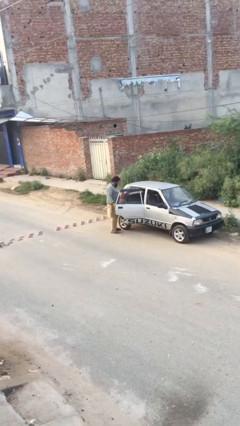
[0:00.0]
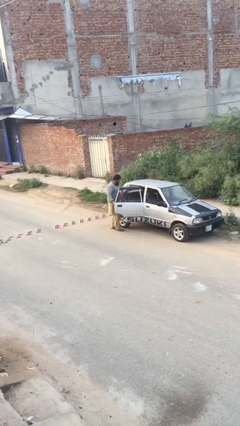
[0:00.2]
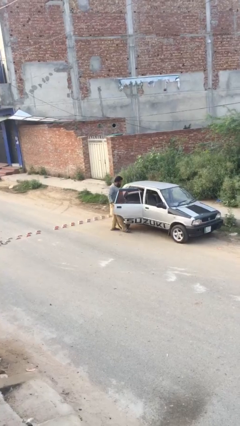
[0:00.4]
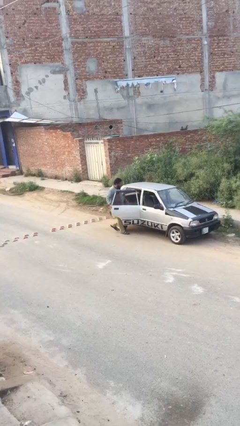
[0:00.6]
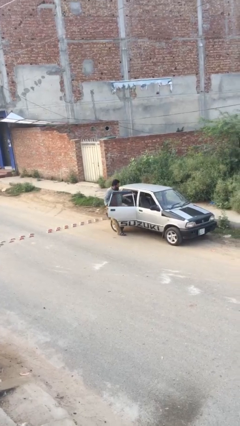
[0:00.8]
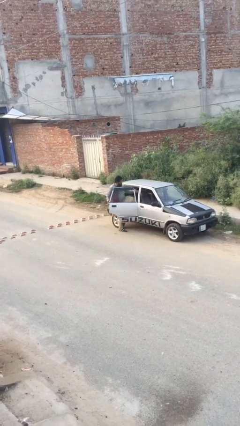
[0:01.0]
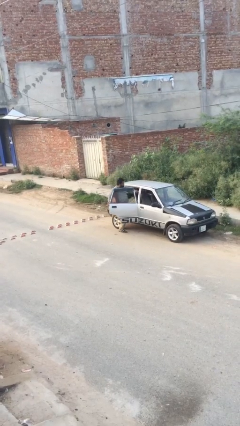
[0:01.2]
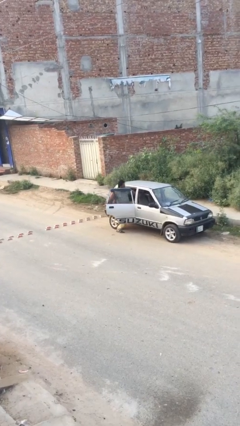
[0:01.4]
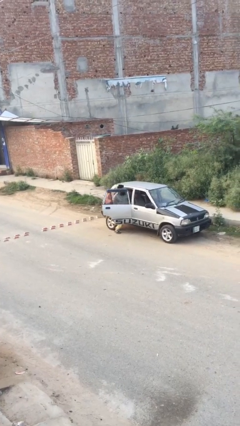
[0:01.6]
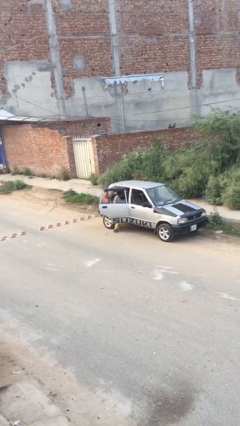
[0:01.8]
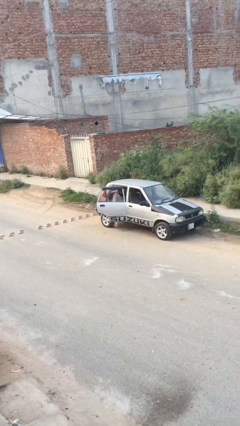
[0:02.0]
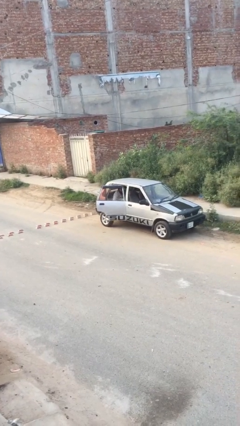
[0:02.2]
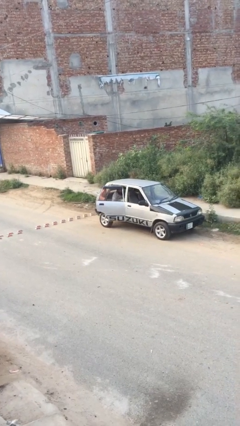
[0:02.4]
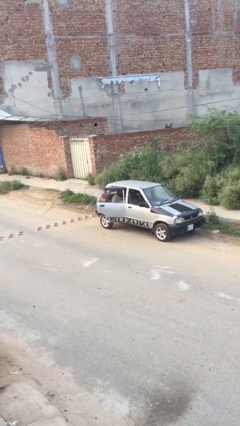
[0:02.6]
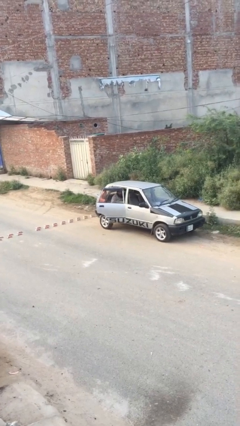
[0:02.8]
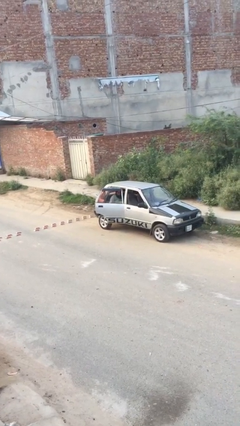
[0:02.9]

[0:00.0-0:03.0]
person enters car

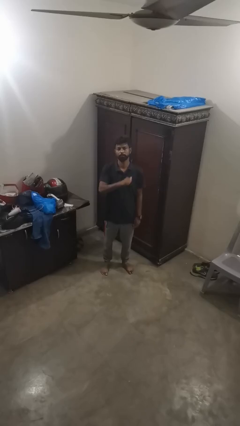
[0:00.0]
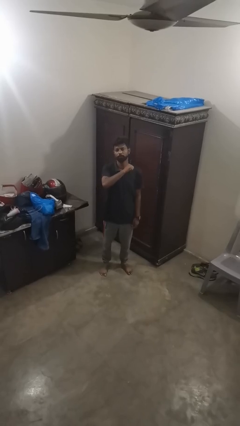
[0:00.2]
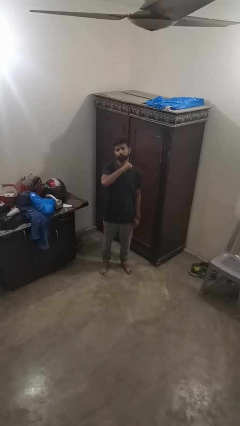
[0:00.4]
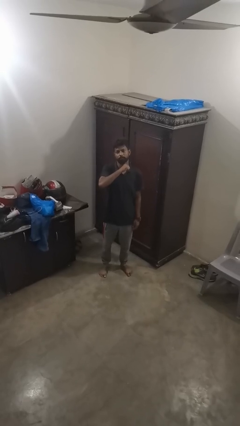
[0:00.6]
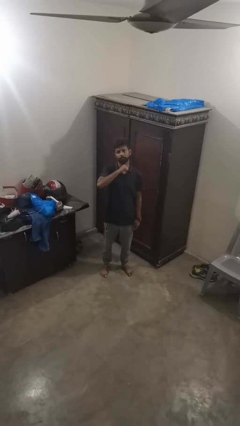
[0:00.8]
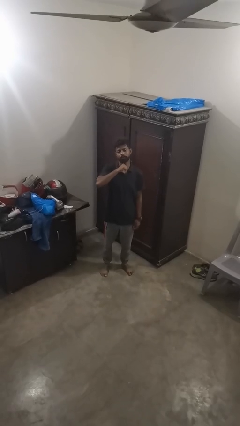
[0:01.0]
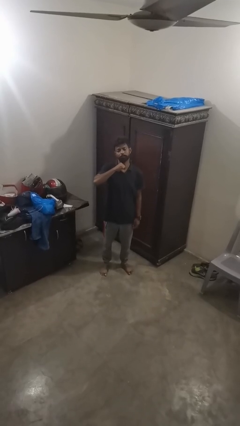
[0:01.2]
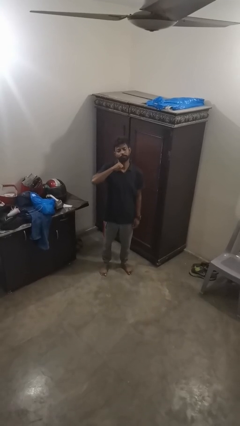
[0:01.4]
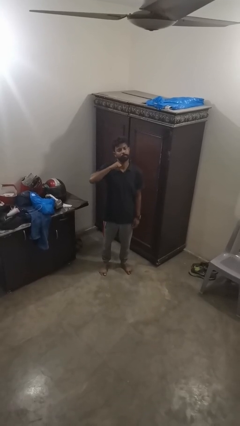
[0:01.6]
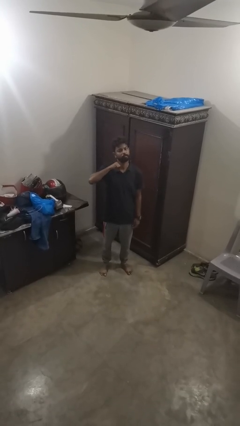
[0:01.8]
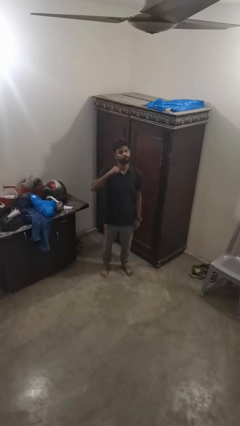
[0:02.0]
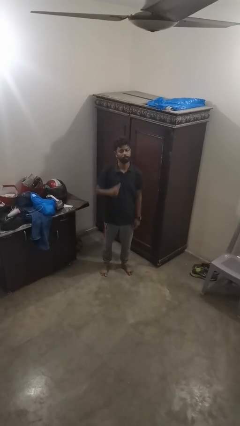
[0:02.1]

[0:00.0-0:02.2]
person gestures cut

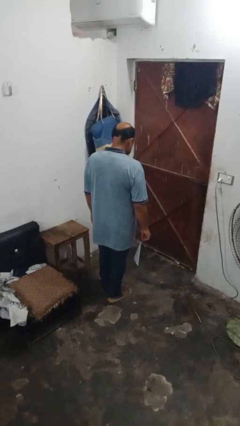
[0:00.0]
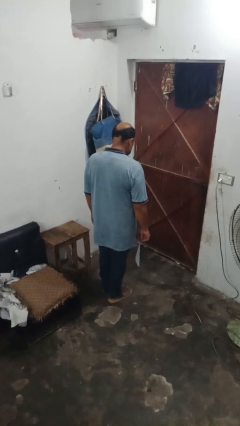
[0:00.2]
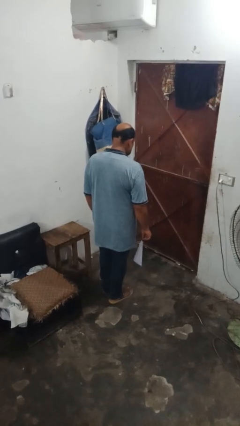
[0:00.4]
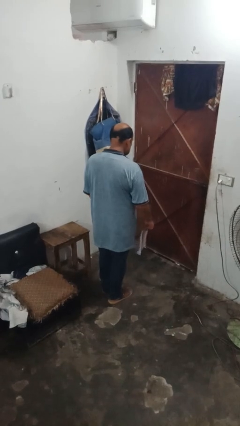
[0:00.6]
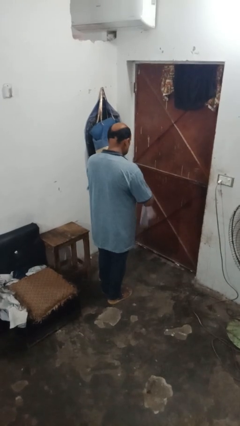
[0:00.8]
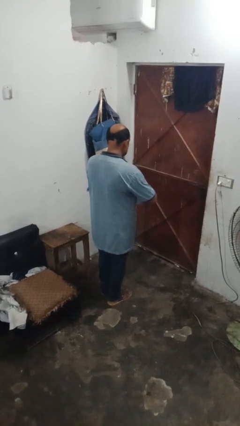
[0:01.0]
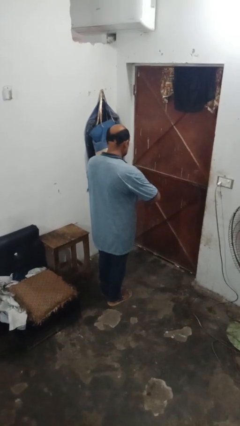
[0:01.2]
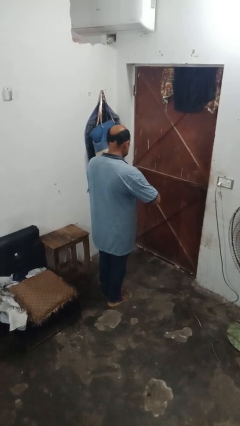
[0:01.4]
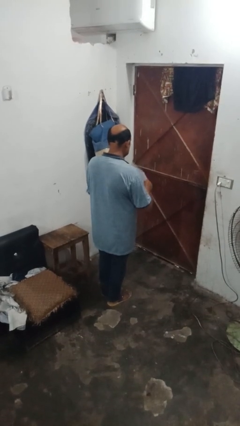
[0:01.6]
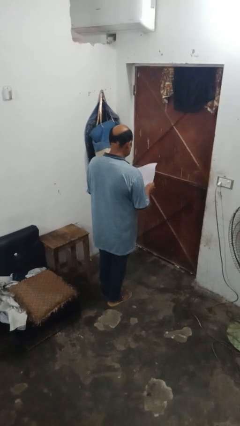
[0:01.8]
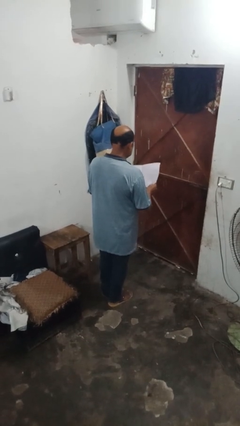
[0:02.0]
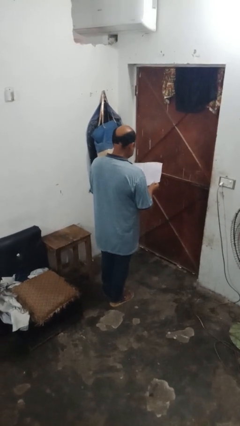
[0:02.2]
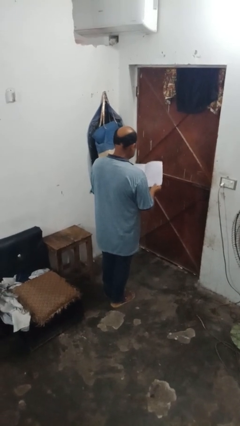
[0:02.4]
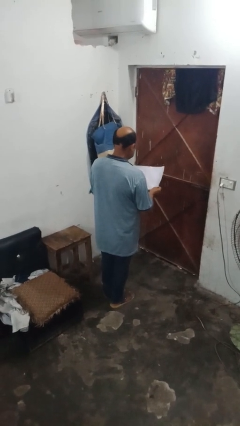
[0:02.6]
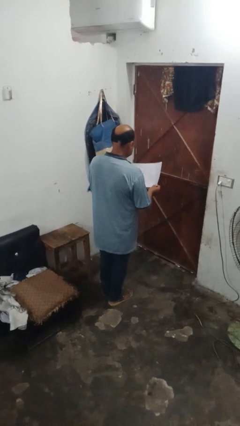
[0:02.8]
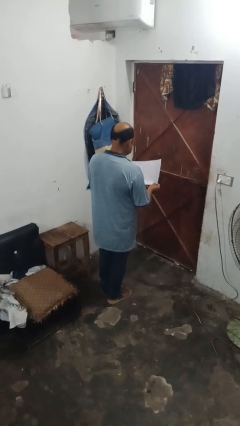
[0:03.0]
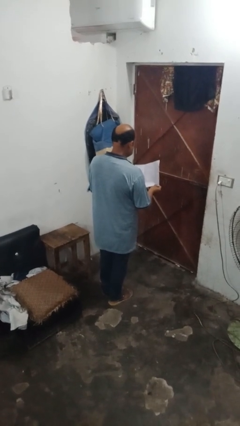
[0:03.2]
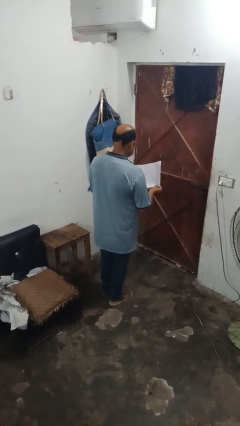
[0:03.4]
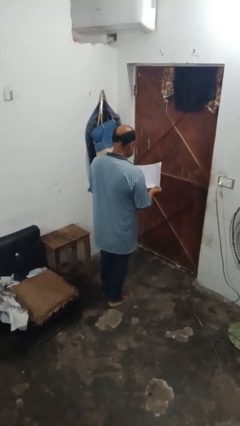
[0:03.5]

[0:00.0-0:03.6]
person reads newspaper

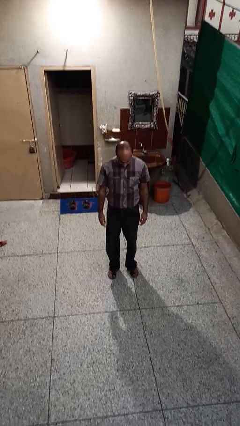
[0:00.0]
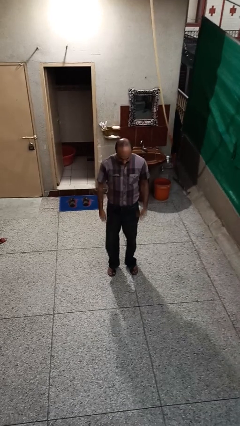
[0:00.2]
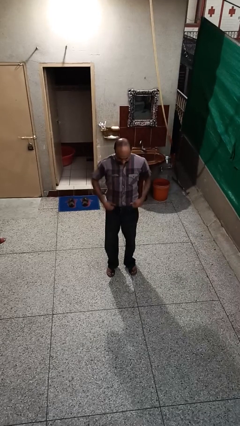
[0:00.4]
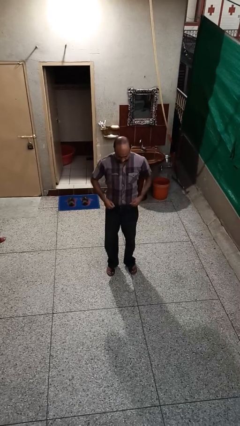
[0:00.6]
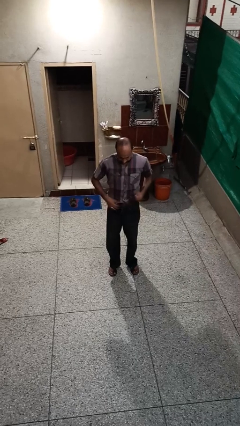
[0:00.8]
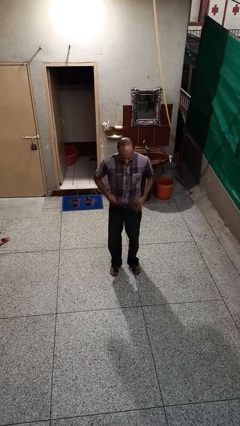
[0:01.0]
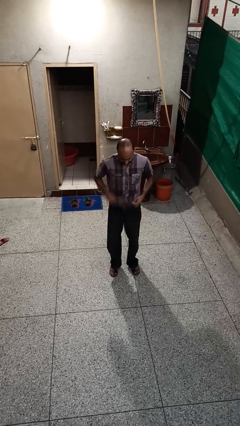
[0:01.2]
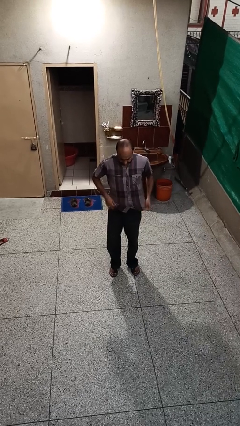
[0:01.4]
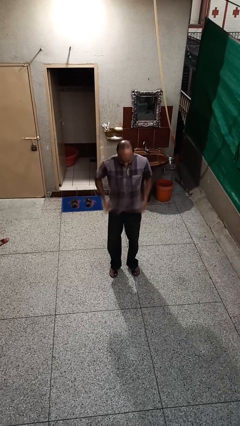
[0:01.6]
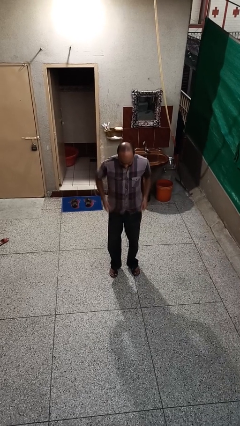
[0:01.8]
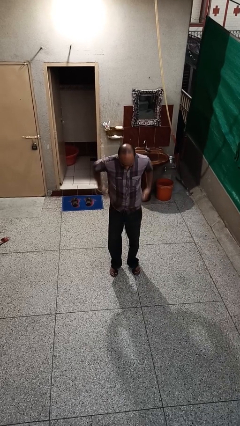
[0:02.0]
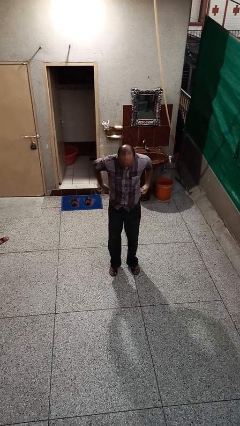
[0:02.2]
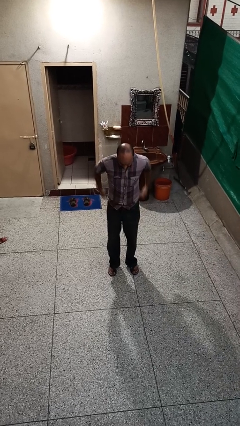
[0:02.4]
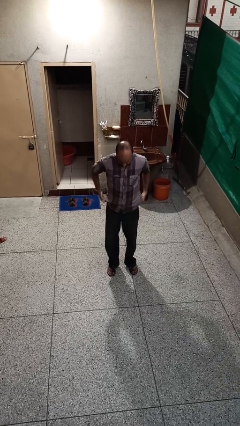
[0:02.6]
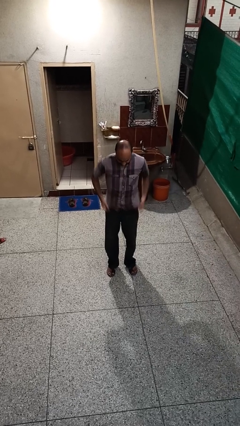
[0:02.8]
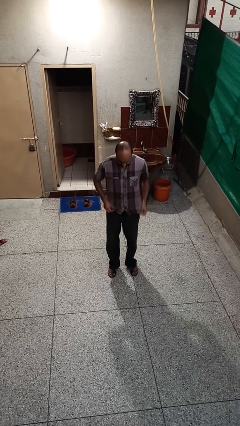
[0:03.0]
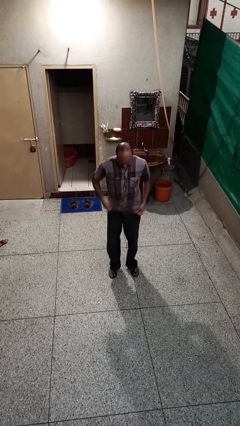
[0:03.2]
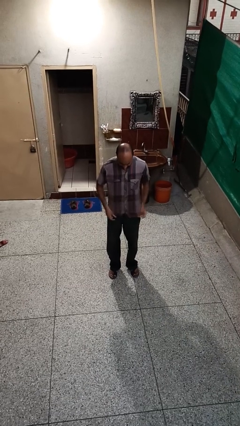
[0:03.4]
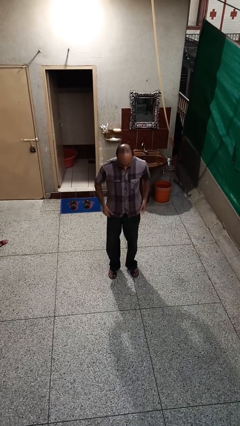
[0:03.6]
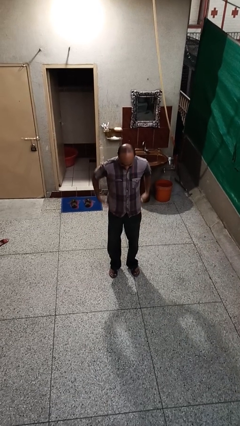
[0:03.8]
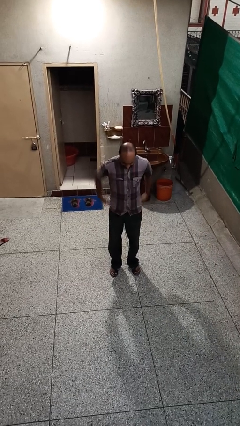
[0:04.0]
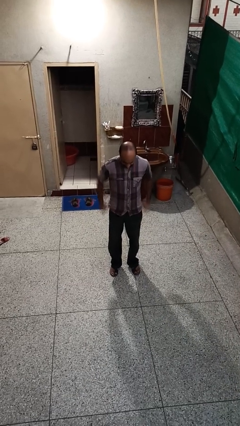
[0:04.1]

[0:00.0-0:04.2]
person untucks shirt

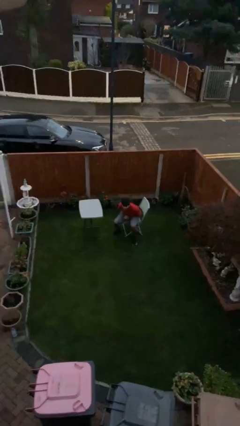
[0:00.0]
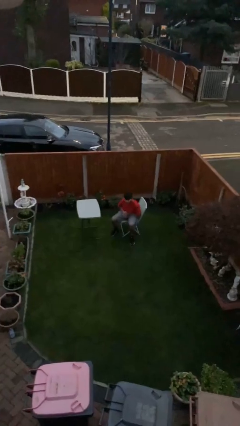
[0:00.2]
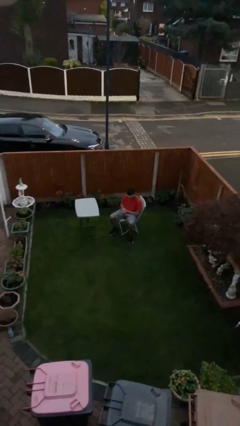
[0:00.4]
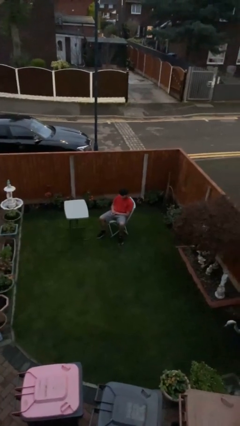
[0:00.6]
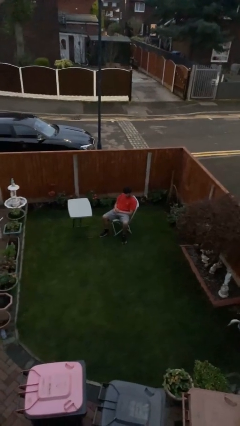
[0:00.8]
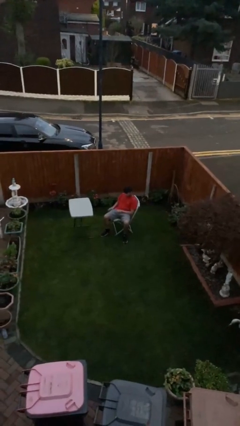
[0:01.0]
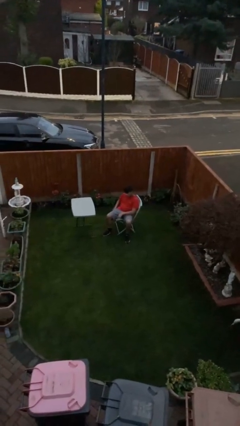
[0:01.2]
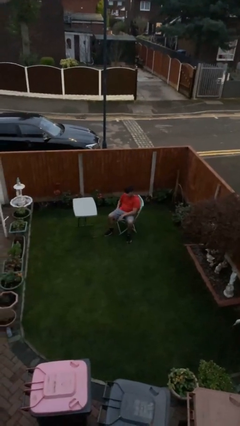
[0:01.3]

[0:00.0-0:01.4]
person sits down

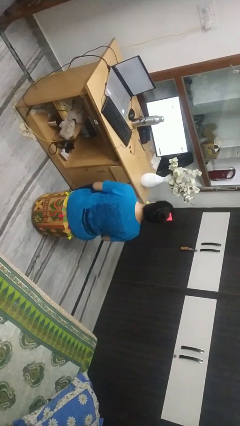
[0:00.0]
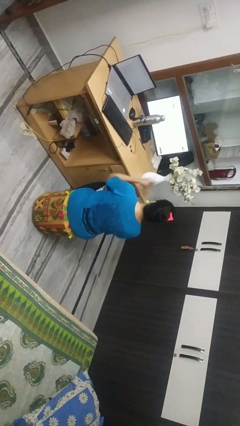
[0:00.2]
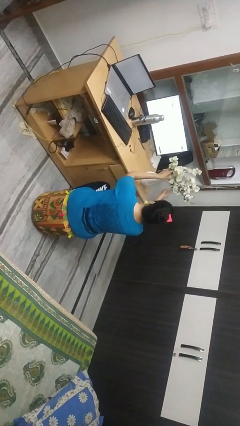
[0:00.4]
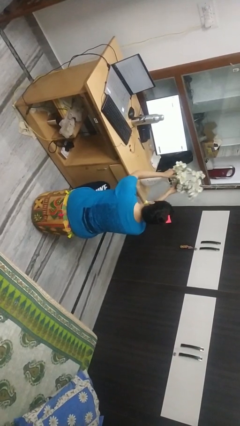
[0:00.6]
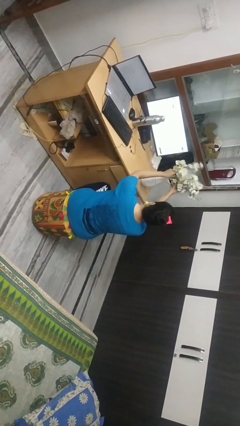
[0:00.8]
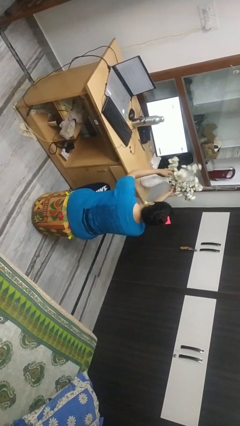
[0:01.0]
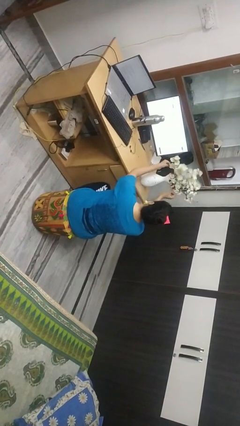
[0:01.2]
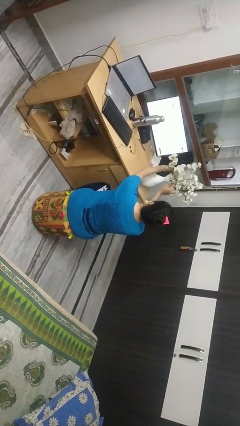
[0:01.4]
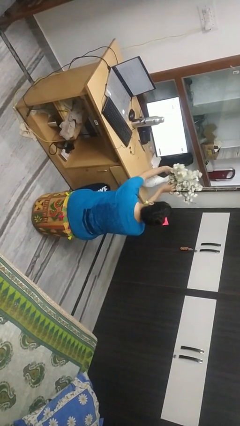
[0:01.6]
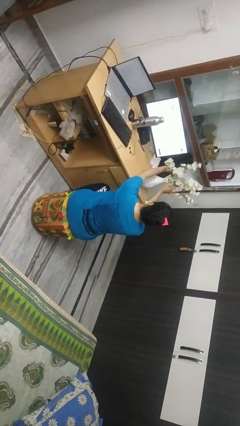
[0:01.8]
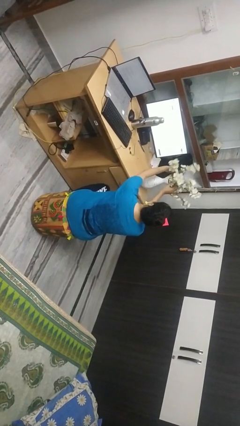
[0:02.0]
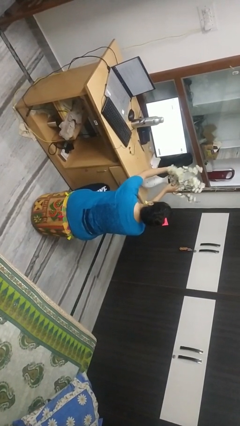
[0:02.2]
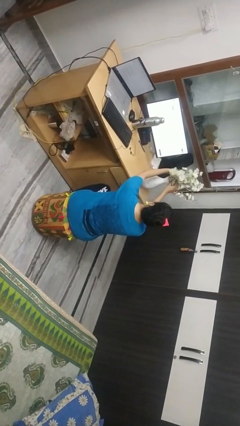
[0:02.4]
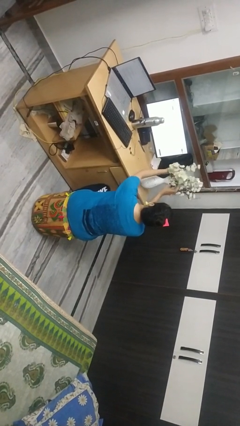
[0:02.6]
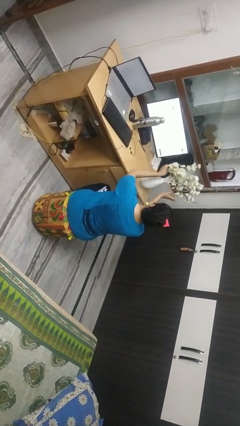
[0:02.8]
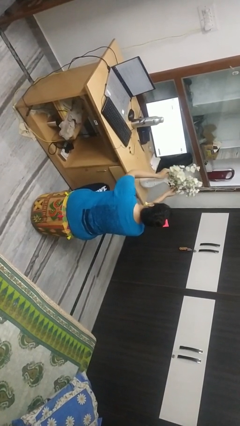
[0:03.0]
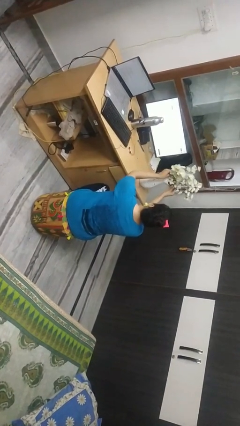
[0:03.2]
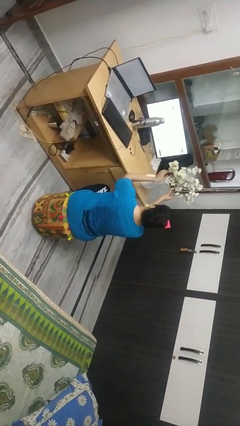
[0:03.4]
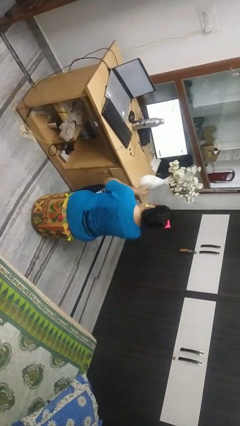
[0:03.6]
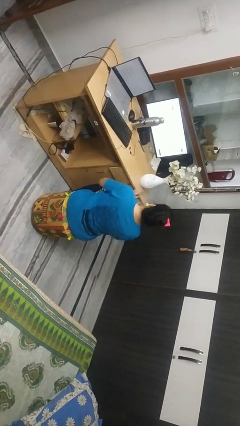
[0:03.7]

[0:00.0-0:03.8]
person arranges flowers in vase
